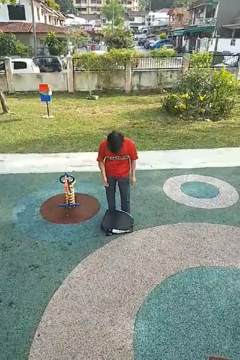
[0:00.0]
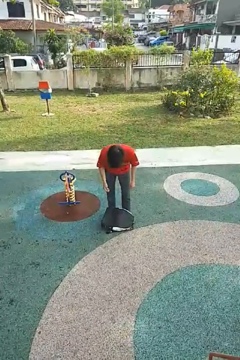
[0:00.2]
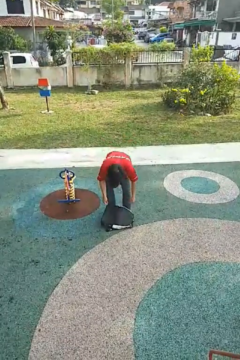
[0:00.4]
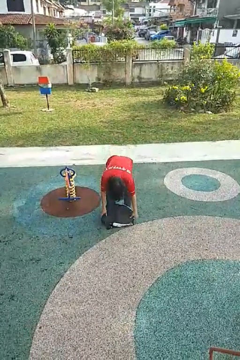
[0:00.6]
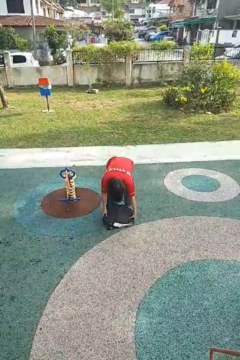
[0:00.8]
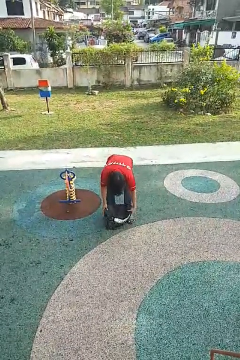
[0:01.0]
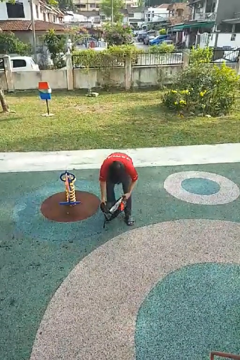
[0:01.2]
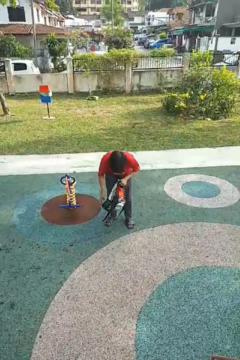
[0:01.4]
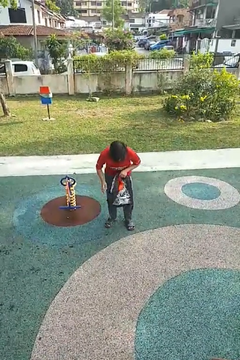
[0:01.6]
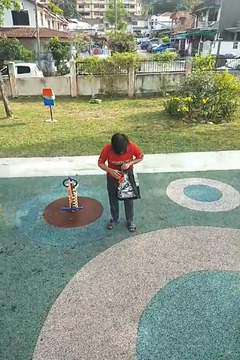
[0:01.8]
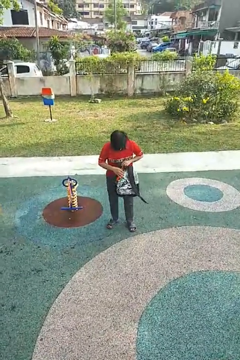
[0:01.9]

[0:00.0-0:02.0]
person picks up object from floor

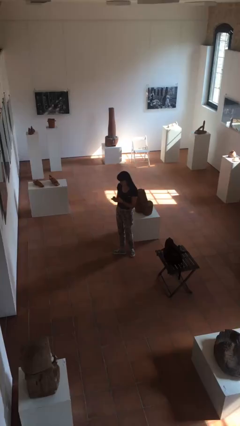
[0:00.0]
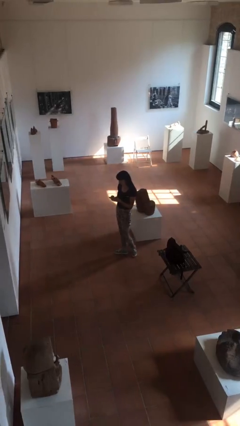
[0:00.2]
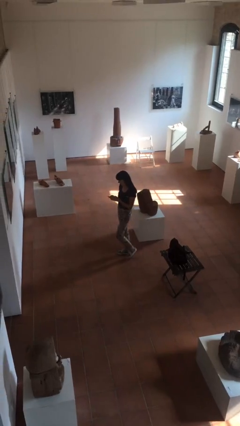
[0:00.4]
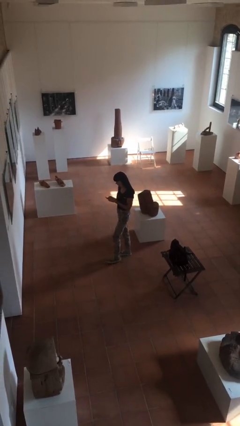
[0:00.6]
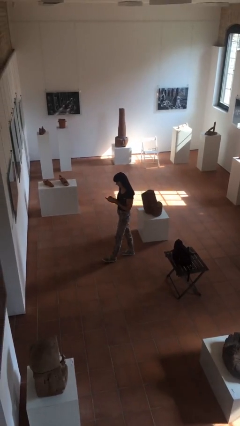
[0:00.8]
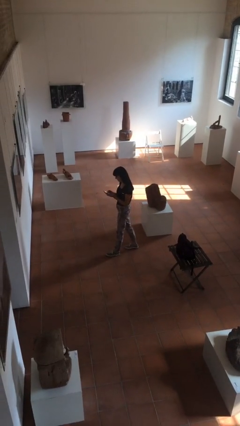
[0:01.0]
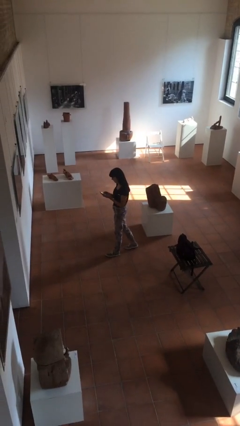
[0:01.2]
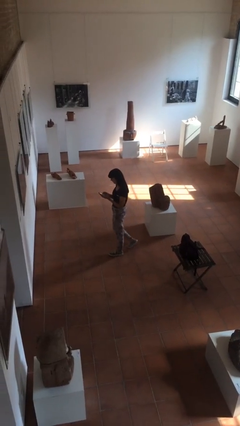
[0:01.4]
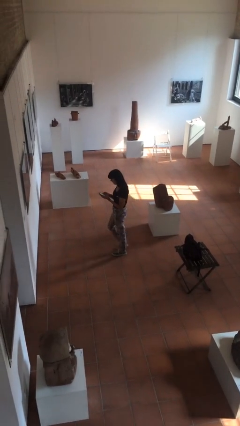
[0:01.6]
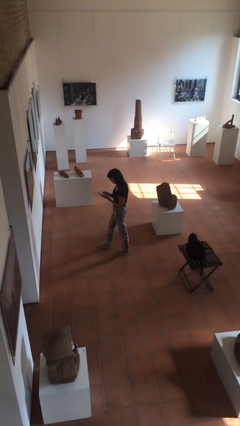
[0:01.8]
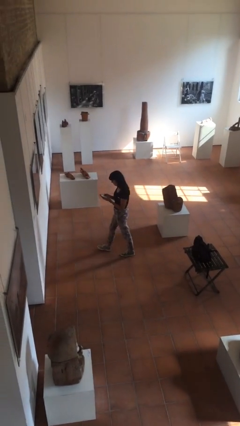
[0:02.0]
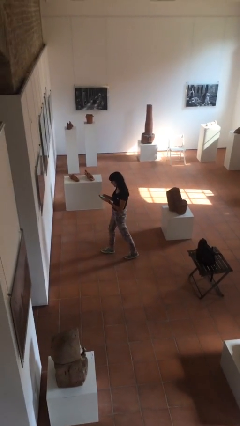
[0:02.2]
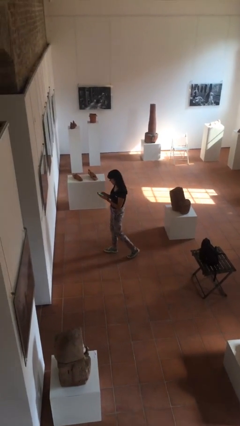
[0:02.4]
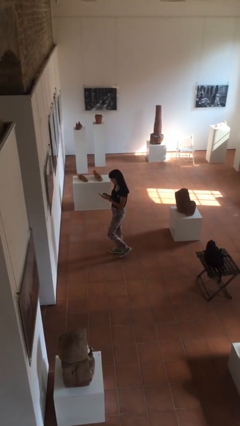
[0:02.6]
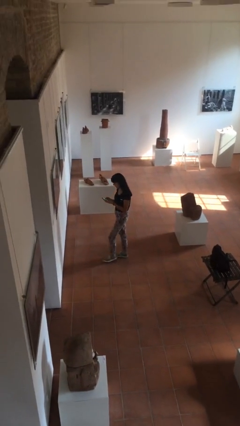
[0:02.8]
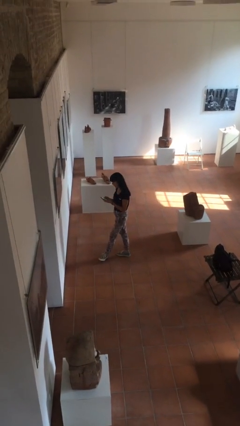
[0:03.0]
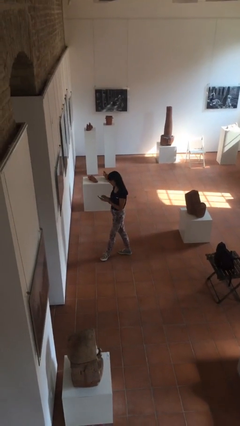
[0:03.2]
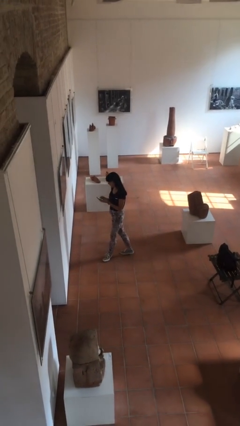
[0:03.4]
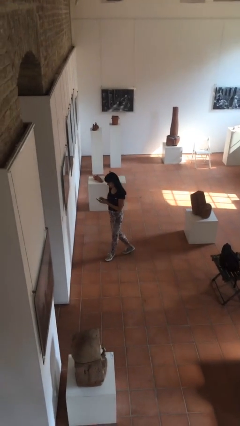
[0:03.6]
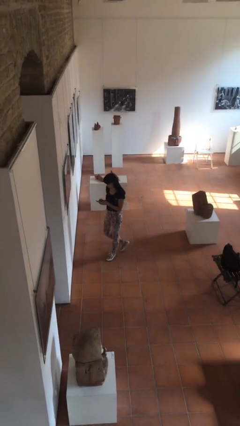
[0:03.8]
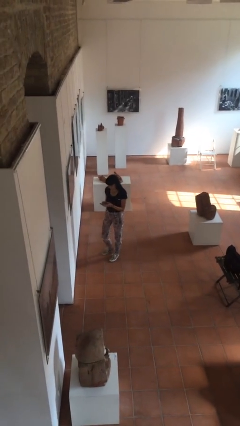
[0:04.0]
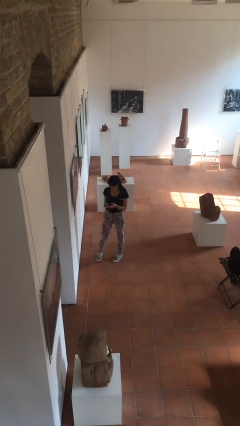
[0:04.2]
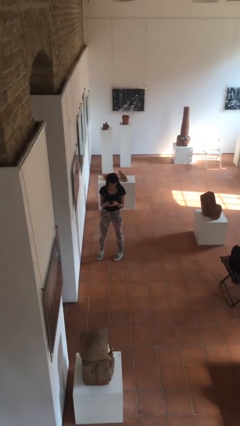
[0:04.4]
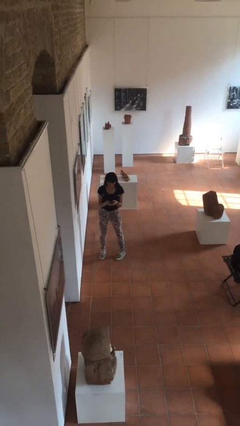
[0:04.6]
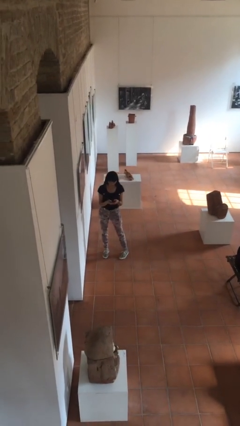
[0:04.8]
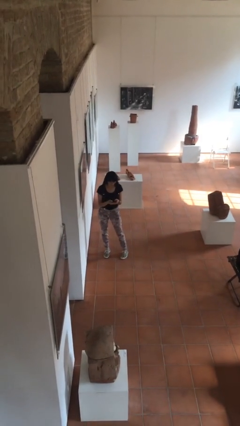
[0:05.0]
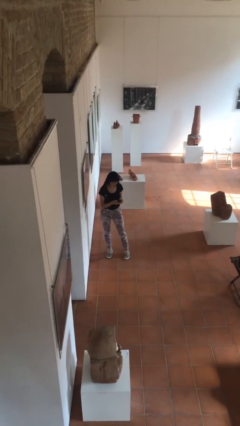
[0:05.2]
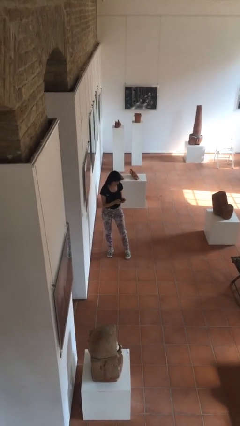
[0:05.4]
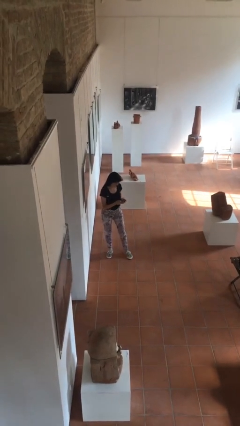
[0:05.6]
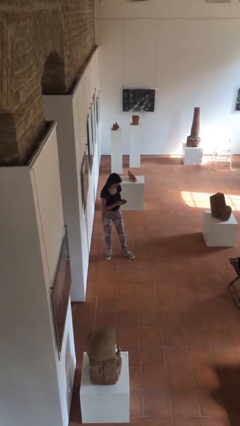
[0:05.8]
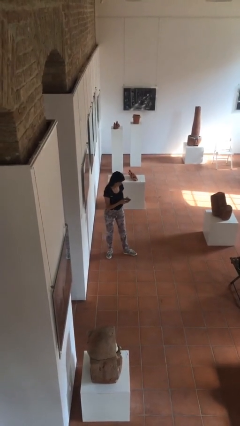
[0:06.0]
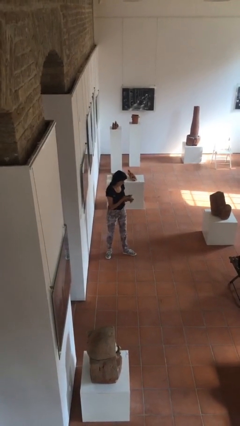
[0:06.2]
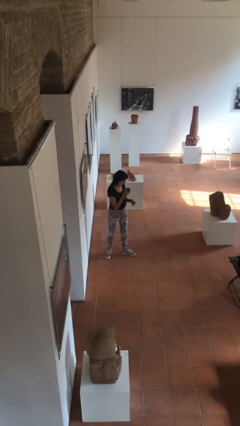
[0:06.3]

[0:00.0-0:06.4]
person texts on phone

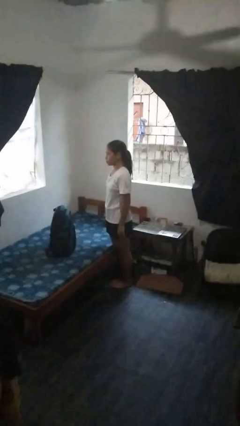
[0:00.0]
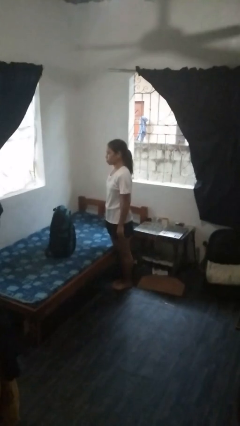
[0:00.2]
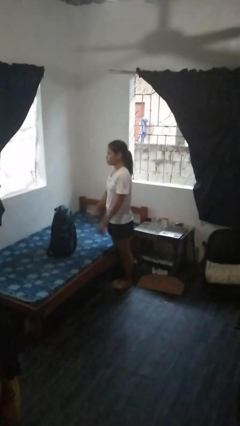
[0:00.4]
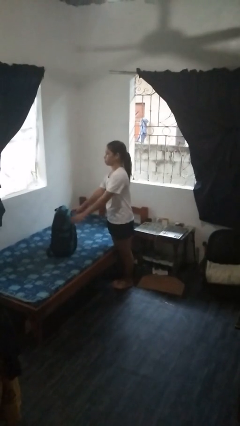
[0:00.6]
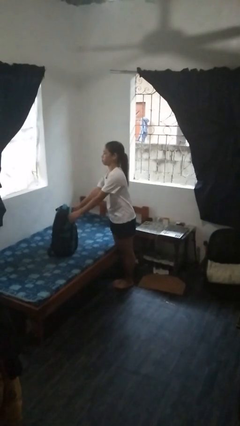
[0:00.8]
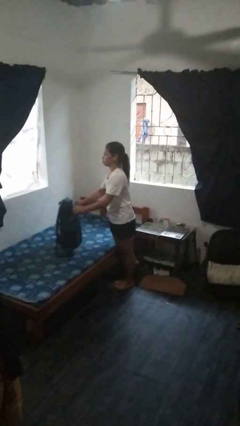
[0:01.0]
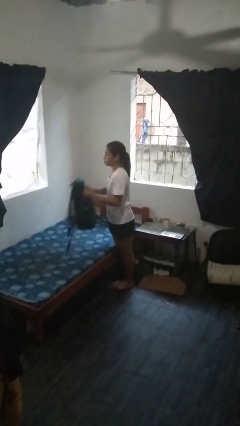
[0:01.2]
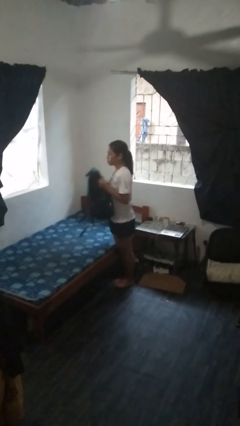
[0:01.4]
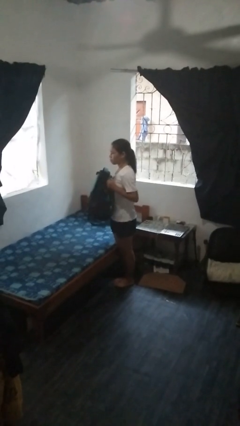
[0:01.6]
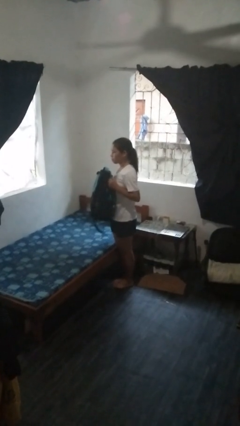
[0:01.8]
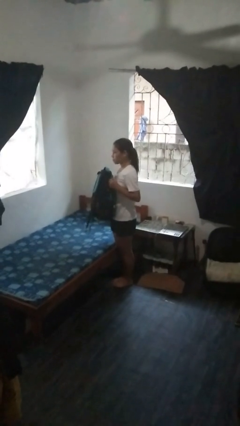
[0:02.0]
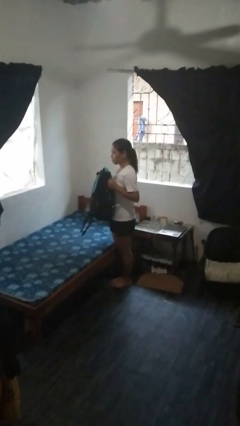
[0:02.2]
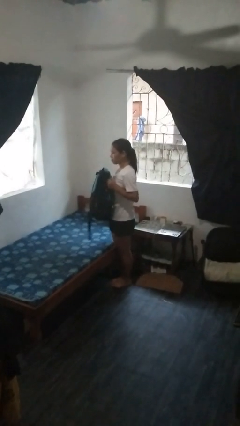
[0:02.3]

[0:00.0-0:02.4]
person picks up object from bed

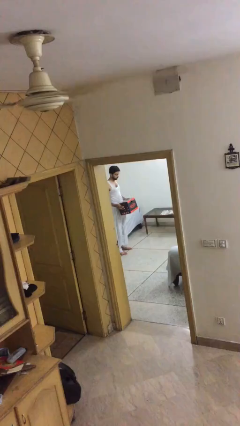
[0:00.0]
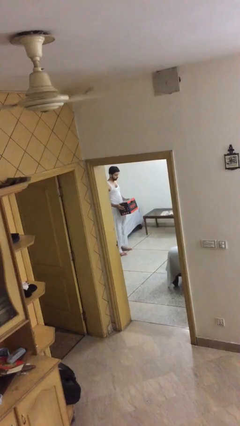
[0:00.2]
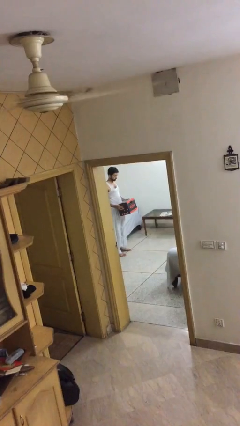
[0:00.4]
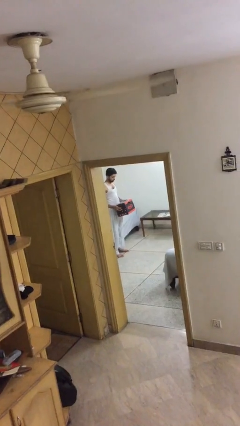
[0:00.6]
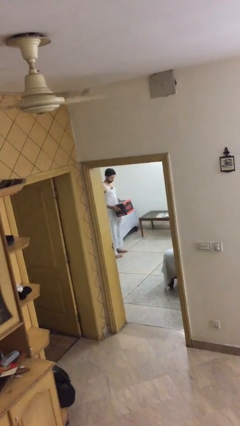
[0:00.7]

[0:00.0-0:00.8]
person puts down object on floor

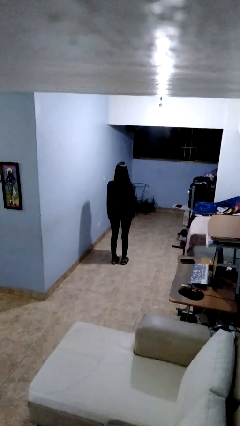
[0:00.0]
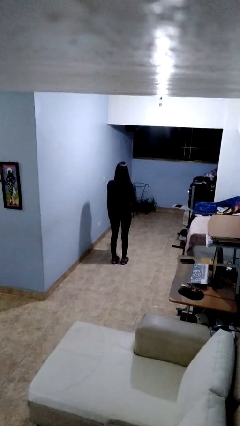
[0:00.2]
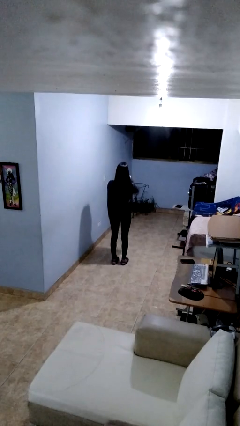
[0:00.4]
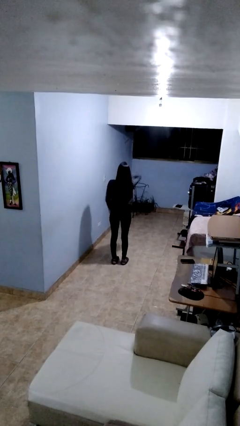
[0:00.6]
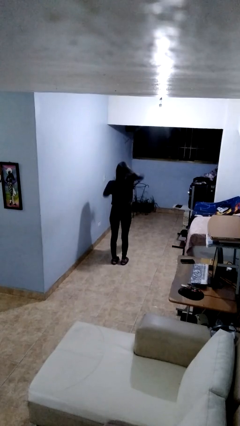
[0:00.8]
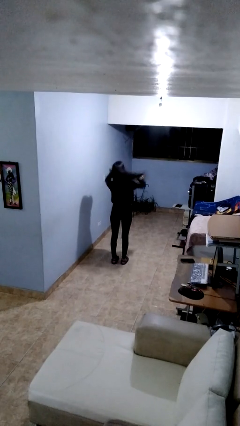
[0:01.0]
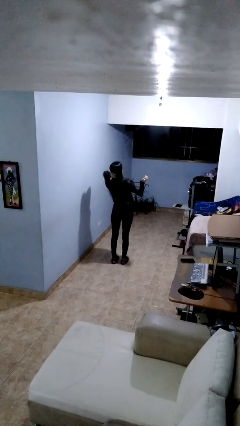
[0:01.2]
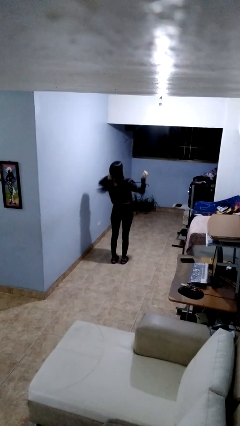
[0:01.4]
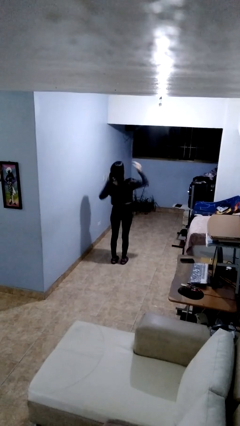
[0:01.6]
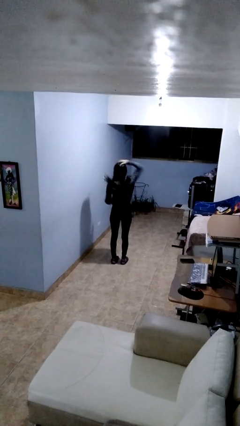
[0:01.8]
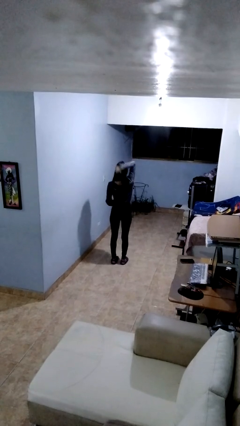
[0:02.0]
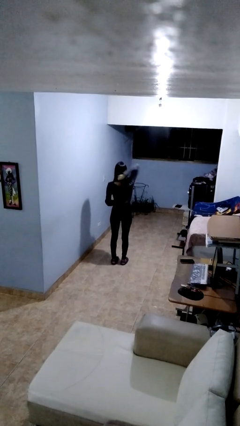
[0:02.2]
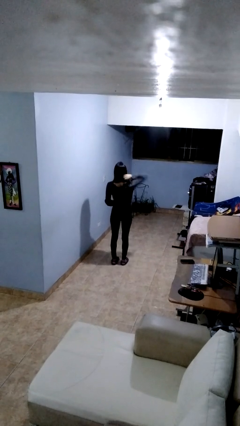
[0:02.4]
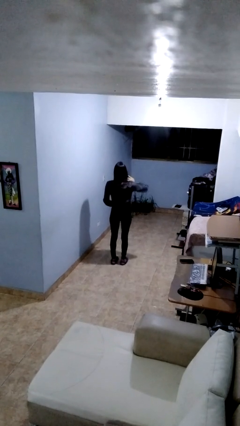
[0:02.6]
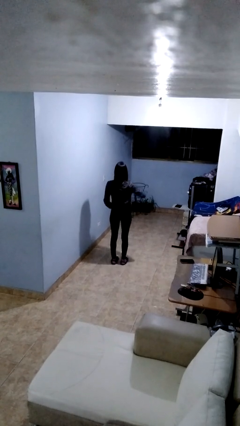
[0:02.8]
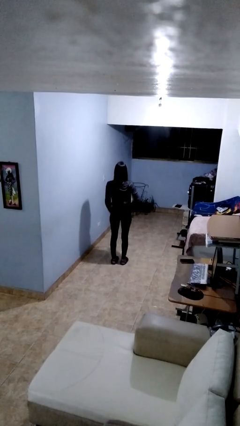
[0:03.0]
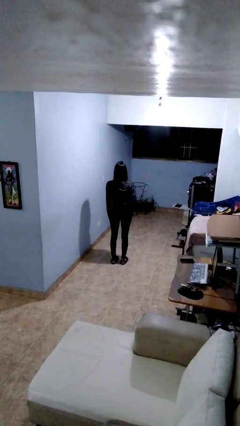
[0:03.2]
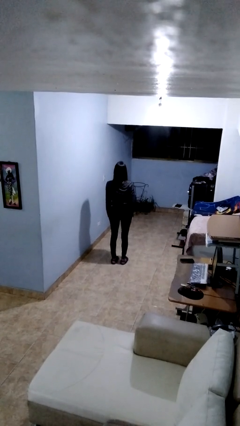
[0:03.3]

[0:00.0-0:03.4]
person strokes hair

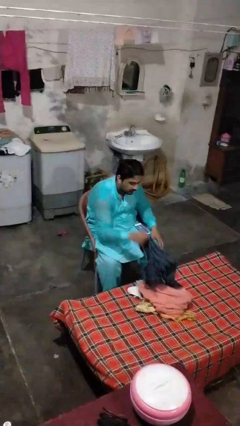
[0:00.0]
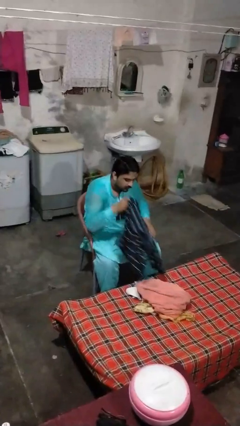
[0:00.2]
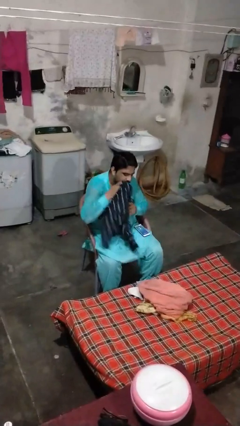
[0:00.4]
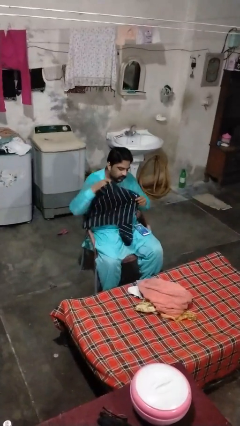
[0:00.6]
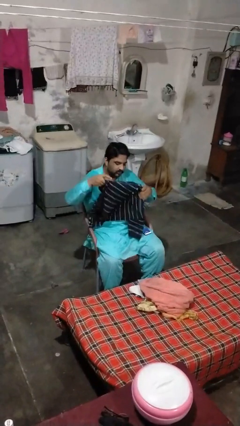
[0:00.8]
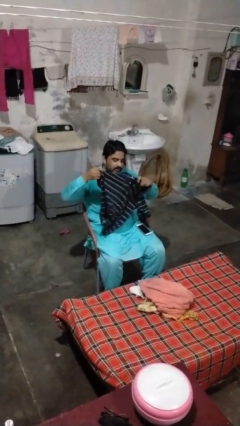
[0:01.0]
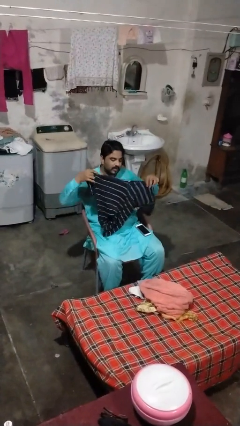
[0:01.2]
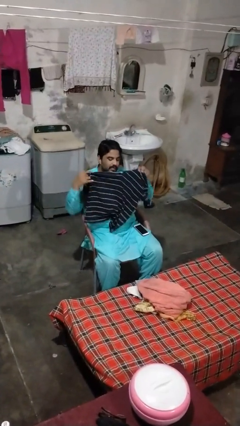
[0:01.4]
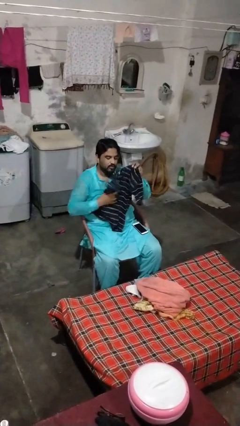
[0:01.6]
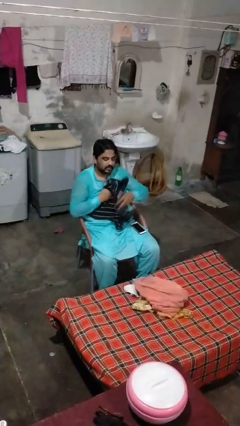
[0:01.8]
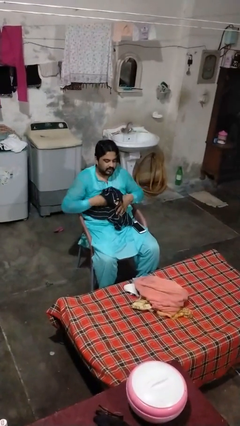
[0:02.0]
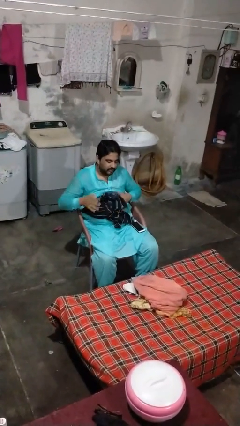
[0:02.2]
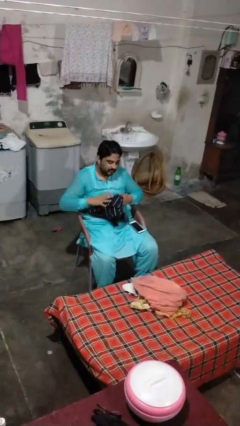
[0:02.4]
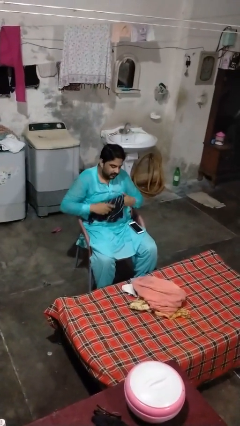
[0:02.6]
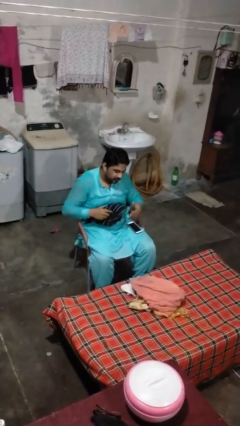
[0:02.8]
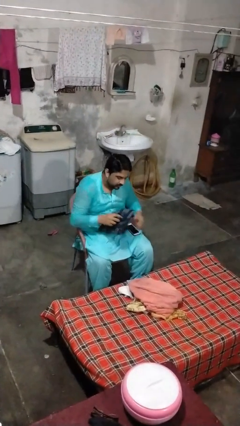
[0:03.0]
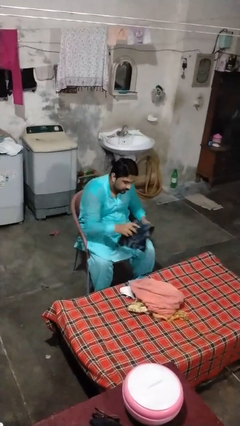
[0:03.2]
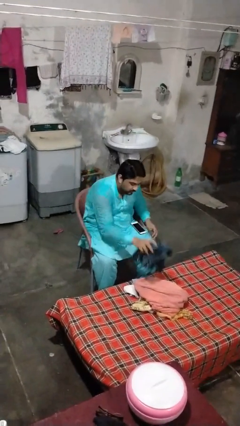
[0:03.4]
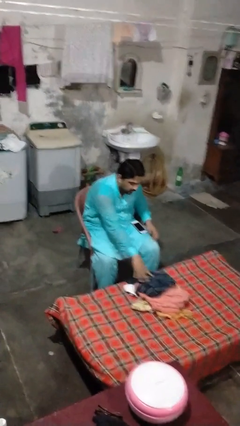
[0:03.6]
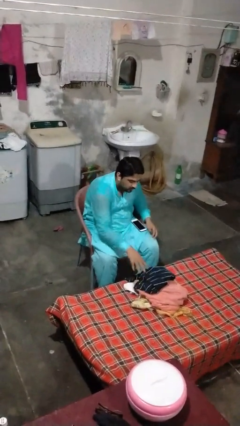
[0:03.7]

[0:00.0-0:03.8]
person folds shirt
